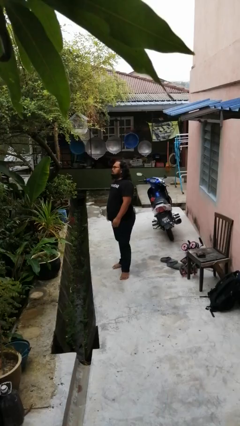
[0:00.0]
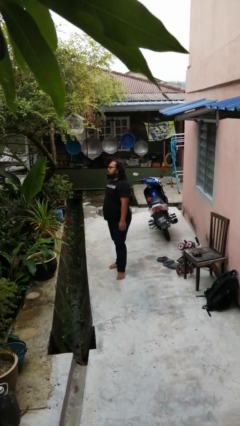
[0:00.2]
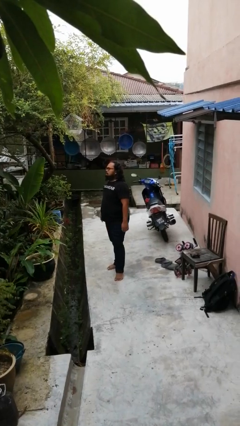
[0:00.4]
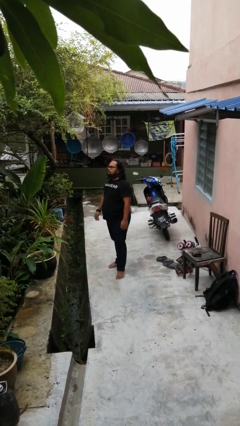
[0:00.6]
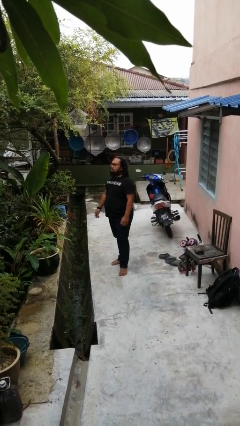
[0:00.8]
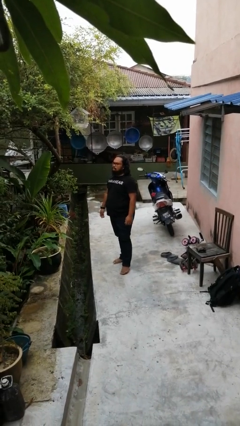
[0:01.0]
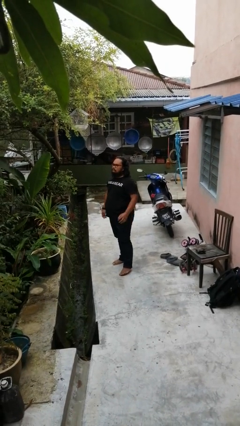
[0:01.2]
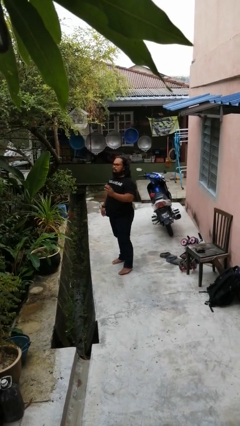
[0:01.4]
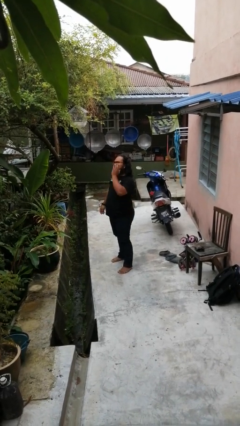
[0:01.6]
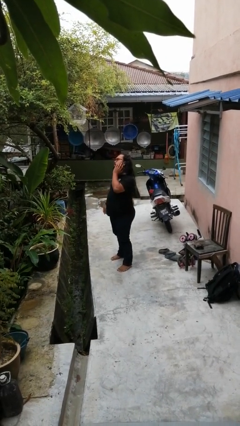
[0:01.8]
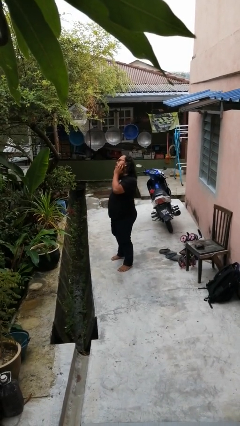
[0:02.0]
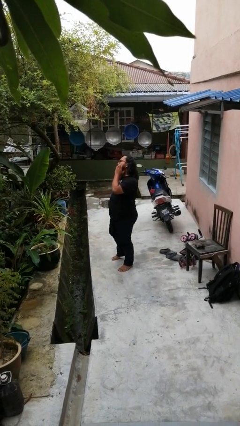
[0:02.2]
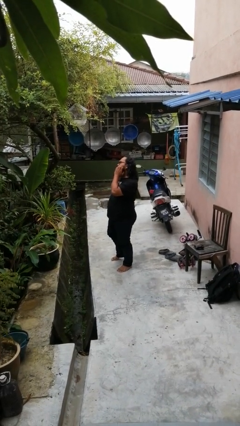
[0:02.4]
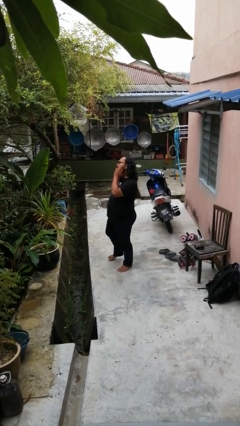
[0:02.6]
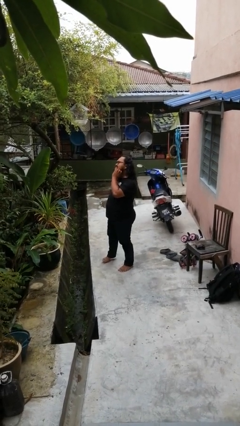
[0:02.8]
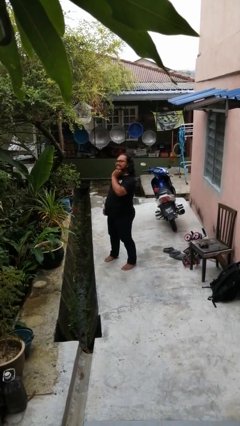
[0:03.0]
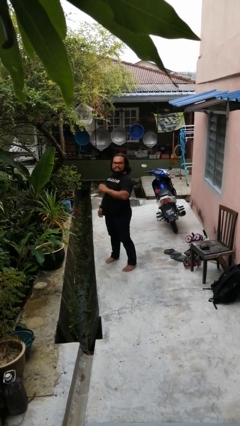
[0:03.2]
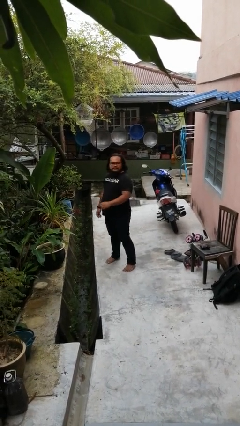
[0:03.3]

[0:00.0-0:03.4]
person scratches face

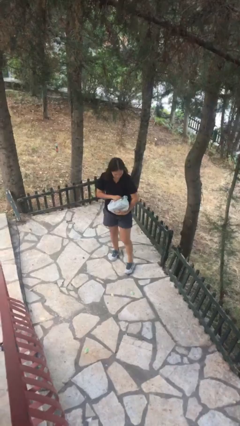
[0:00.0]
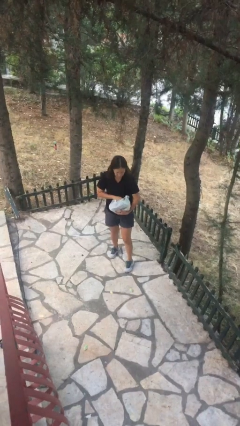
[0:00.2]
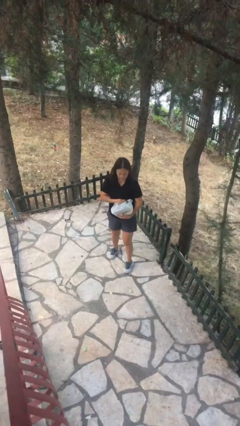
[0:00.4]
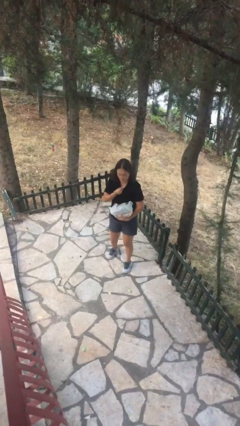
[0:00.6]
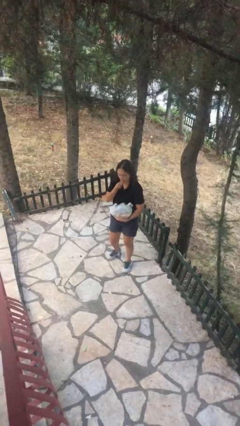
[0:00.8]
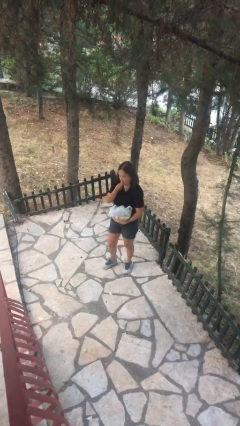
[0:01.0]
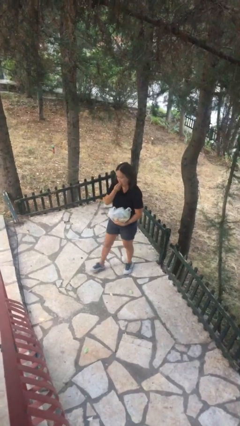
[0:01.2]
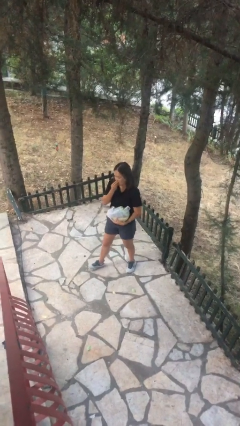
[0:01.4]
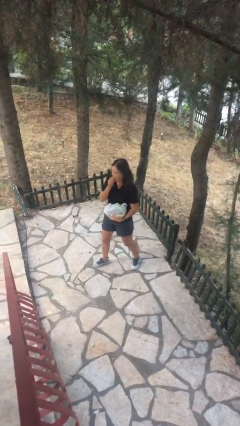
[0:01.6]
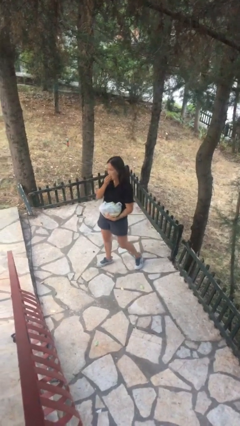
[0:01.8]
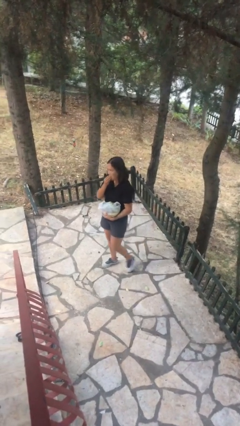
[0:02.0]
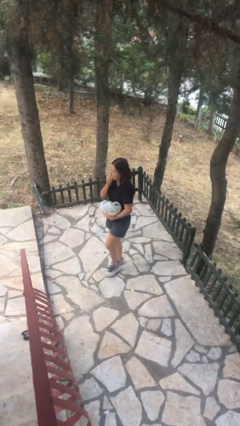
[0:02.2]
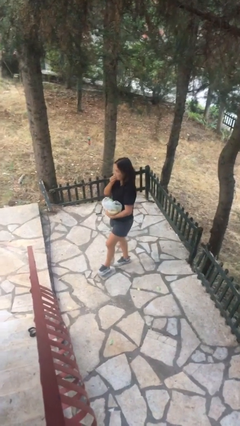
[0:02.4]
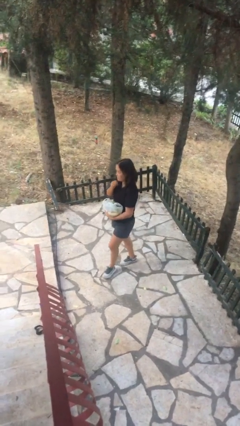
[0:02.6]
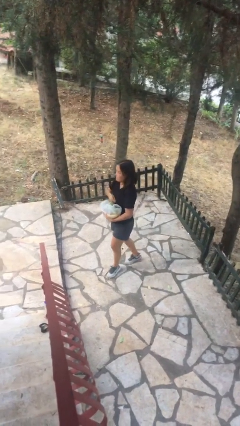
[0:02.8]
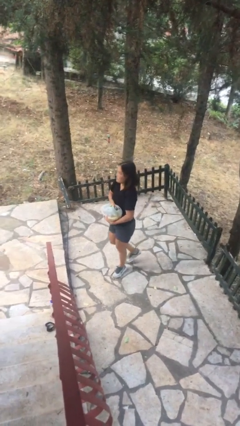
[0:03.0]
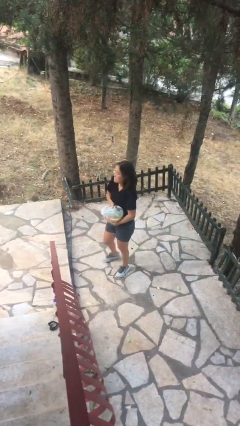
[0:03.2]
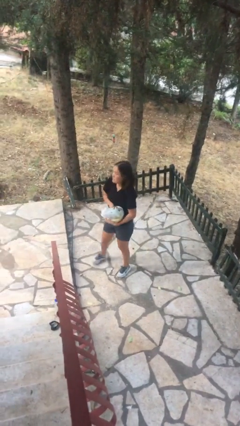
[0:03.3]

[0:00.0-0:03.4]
person eats snack from bag

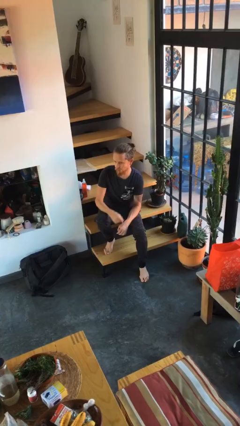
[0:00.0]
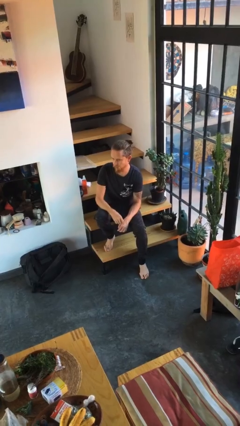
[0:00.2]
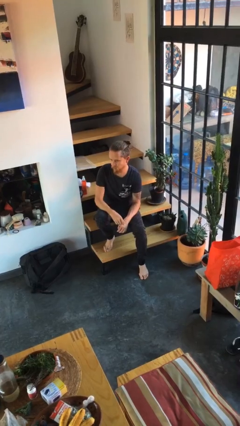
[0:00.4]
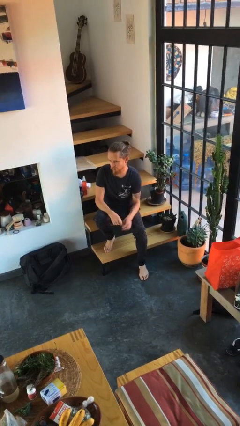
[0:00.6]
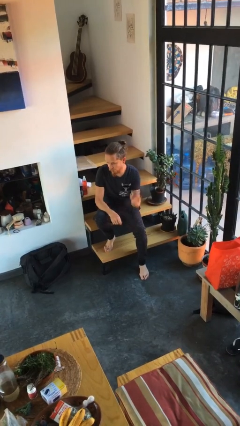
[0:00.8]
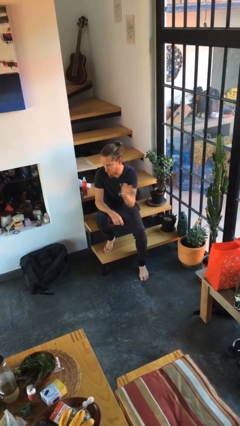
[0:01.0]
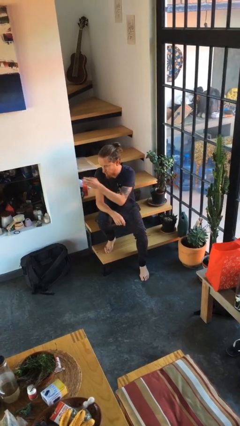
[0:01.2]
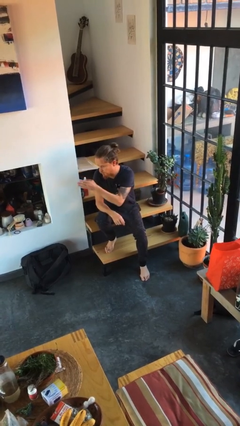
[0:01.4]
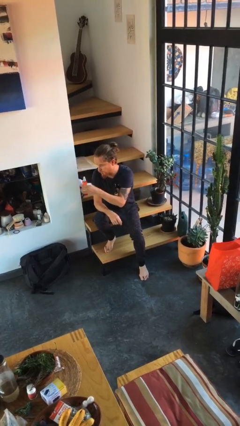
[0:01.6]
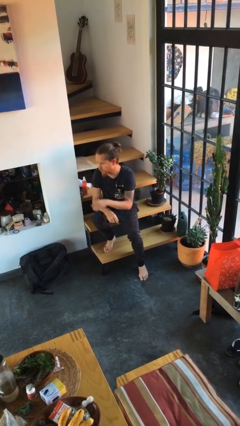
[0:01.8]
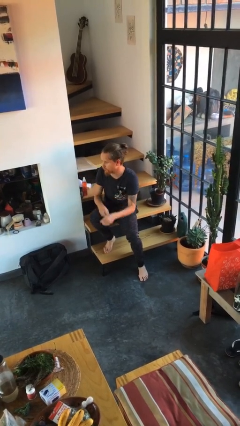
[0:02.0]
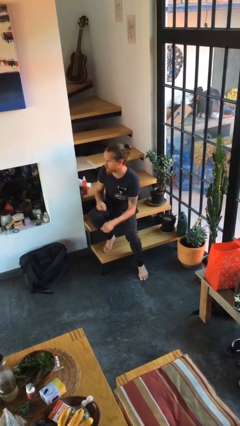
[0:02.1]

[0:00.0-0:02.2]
person gestures swipe right

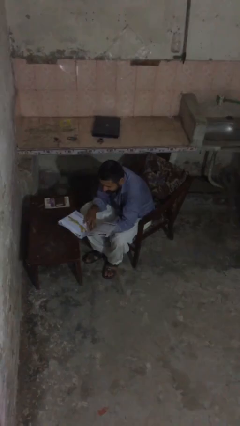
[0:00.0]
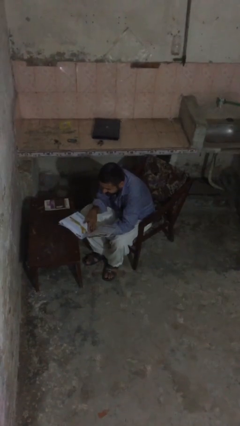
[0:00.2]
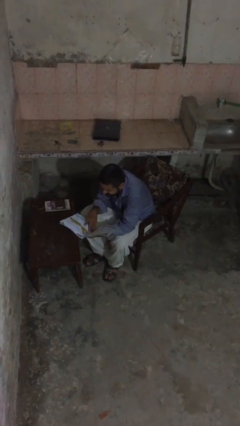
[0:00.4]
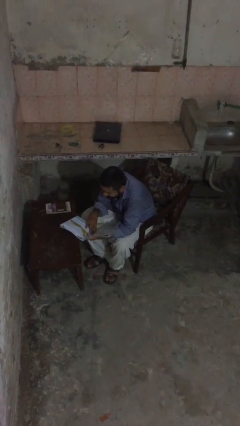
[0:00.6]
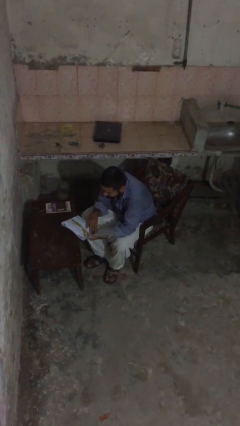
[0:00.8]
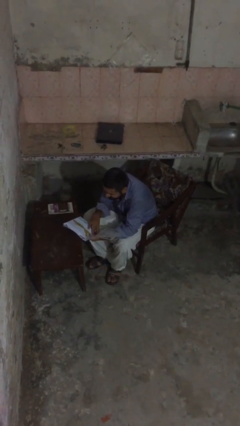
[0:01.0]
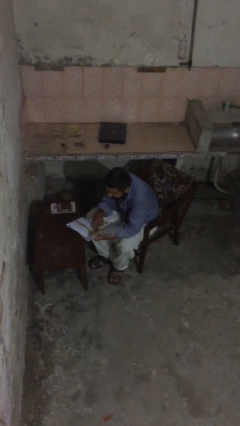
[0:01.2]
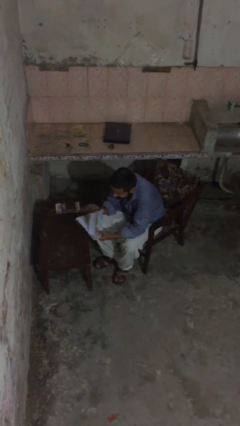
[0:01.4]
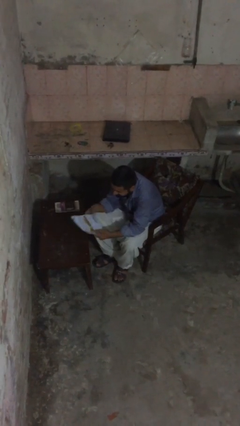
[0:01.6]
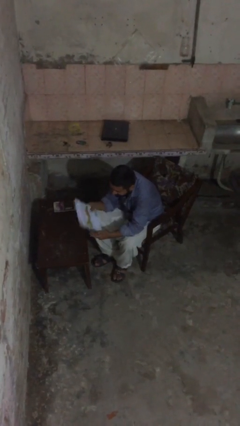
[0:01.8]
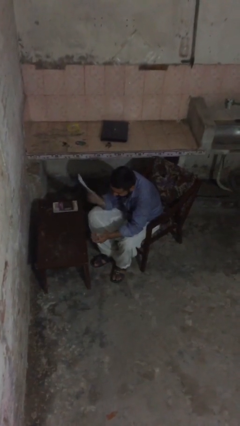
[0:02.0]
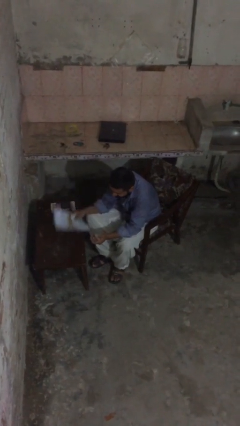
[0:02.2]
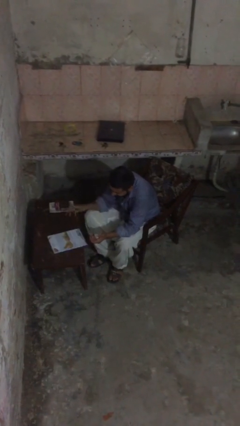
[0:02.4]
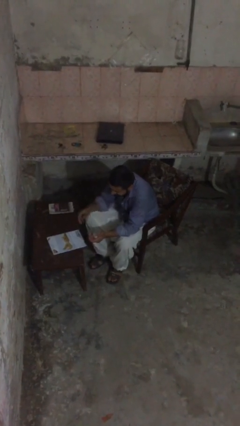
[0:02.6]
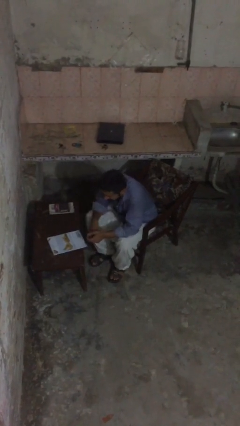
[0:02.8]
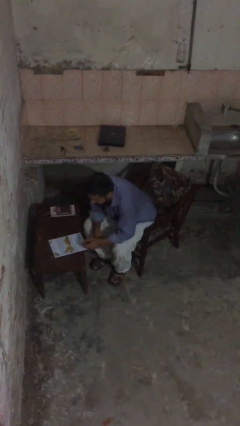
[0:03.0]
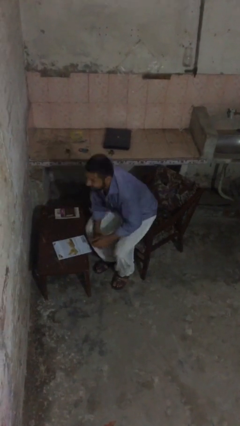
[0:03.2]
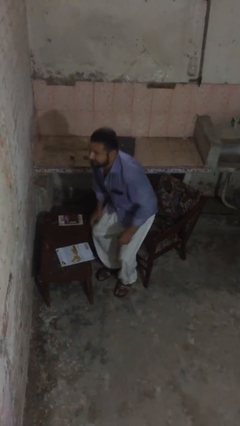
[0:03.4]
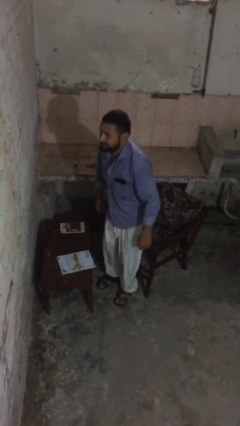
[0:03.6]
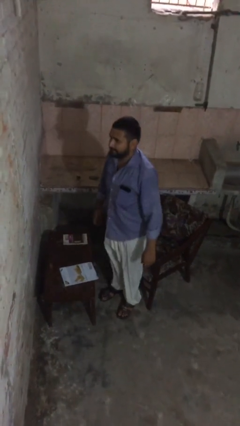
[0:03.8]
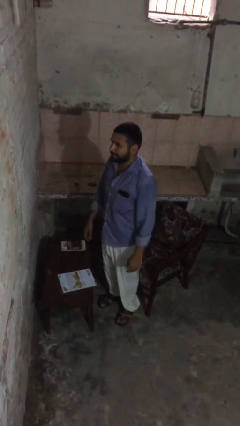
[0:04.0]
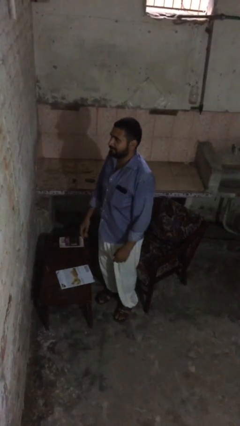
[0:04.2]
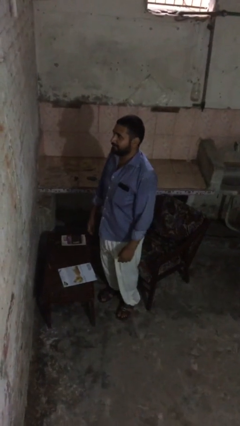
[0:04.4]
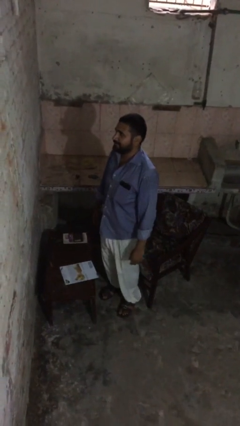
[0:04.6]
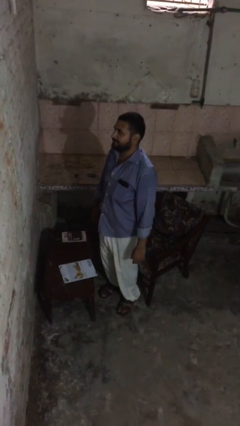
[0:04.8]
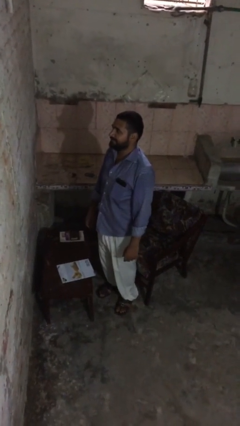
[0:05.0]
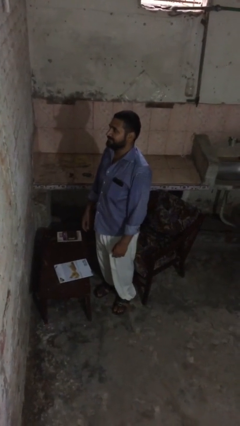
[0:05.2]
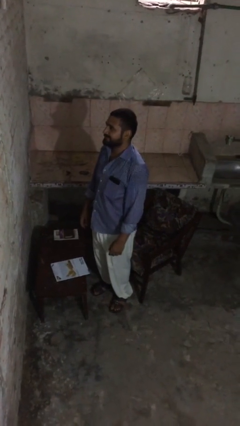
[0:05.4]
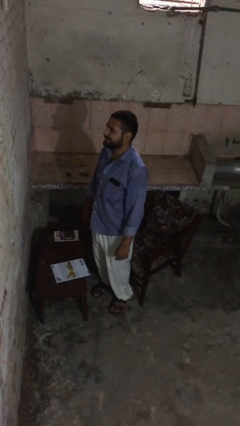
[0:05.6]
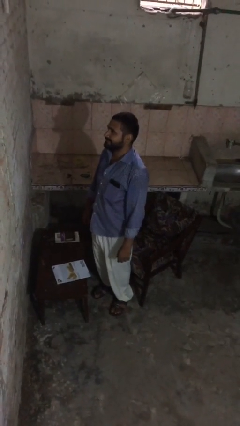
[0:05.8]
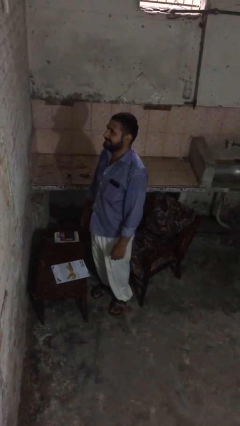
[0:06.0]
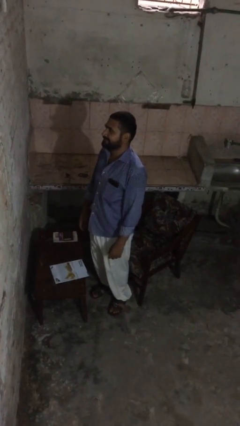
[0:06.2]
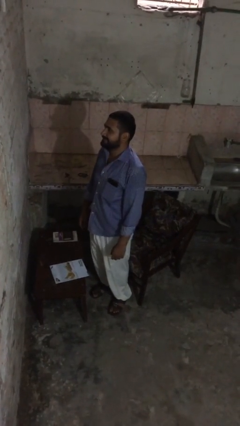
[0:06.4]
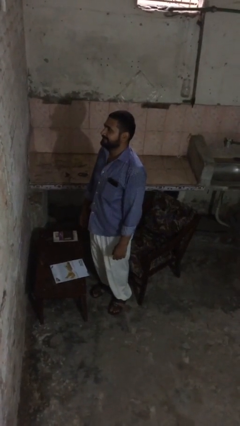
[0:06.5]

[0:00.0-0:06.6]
person stands up

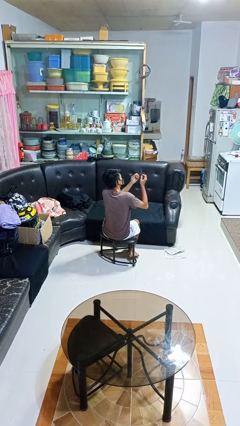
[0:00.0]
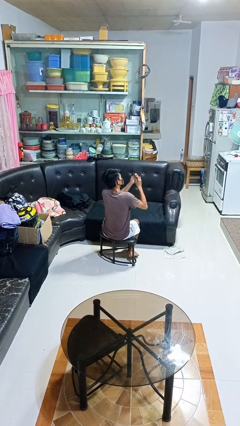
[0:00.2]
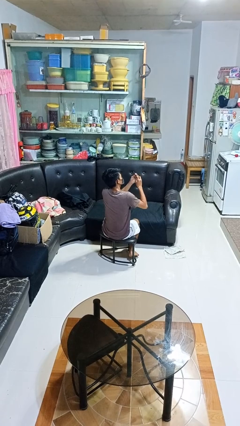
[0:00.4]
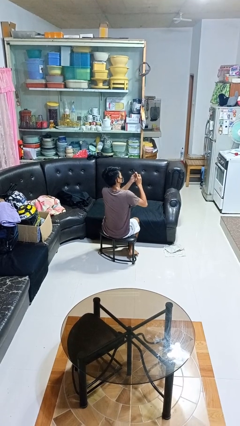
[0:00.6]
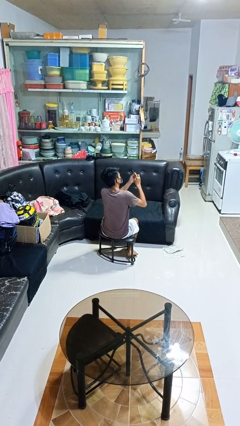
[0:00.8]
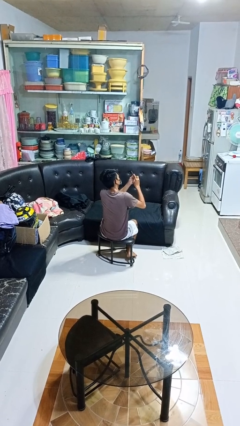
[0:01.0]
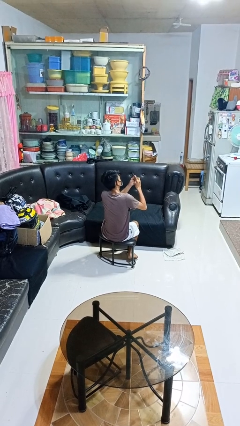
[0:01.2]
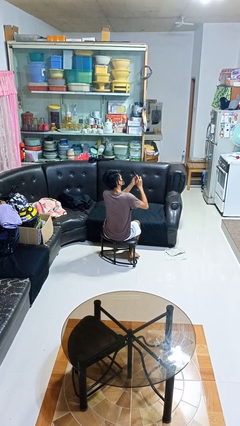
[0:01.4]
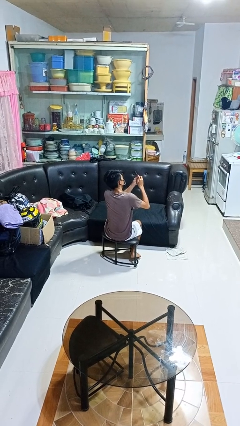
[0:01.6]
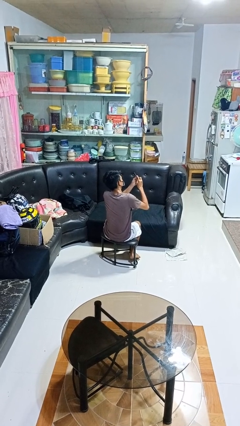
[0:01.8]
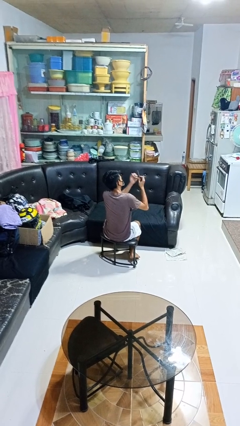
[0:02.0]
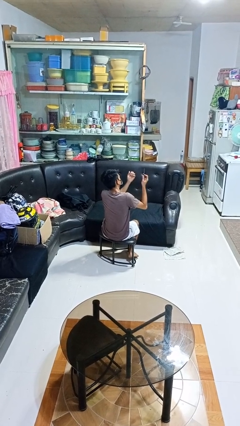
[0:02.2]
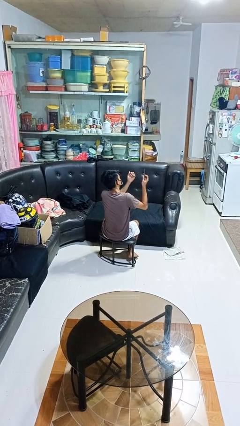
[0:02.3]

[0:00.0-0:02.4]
person files fingernails
